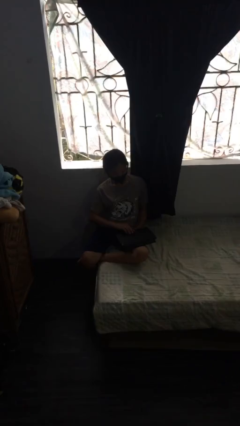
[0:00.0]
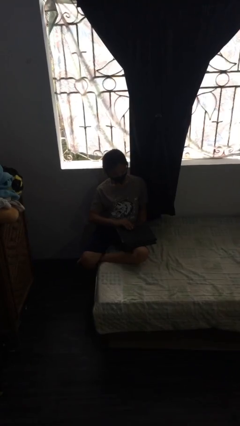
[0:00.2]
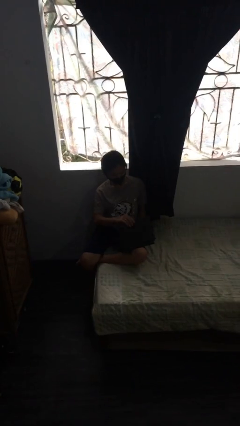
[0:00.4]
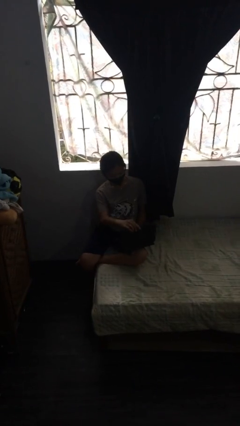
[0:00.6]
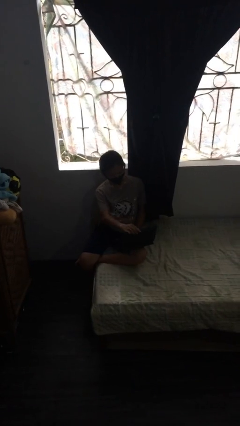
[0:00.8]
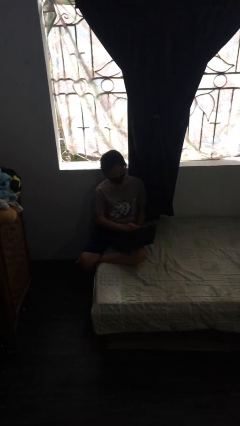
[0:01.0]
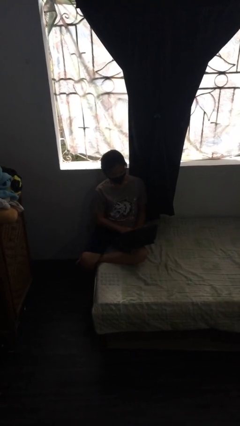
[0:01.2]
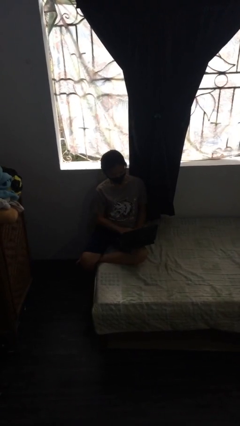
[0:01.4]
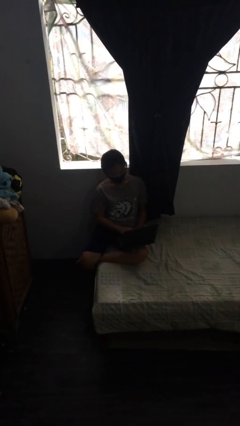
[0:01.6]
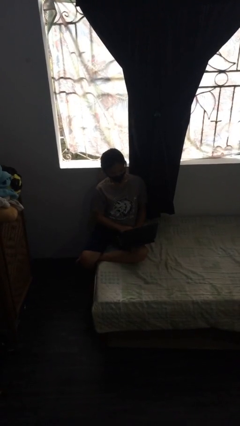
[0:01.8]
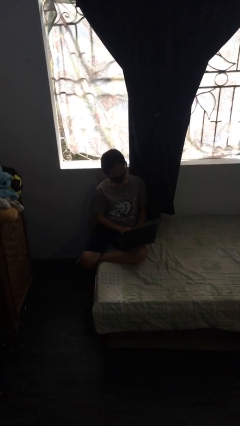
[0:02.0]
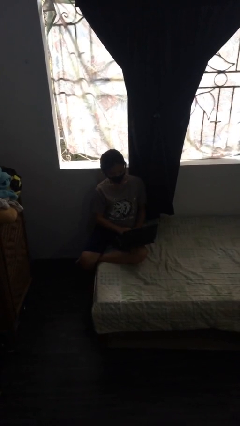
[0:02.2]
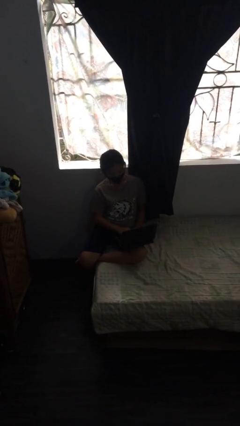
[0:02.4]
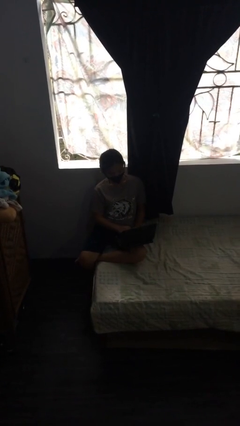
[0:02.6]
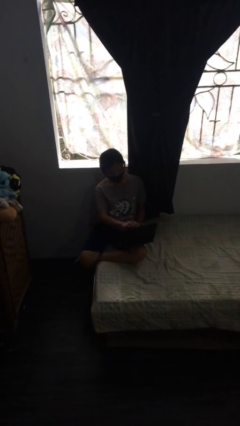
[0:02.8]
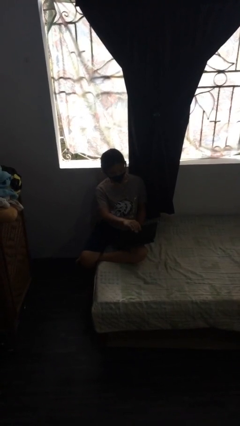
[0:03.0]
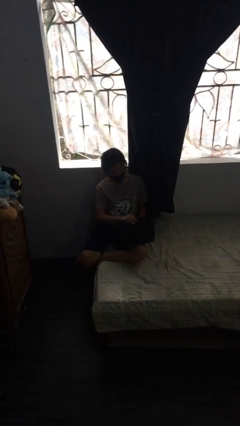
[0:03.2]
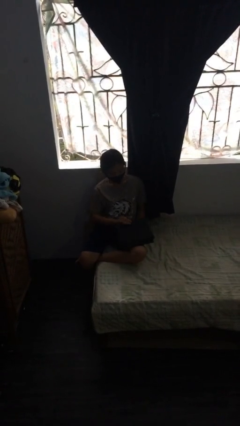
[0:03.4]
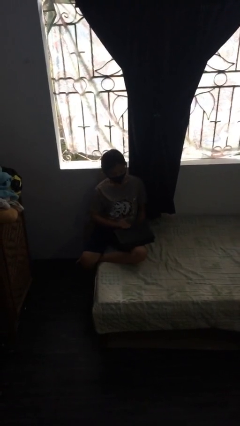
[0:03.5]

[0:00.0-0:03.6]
person interacts with laptop

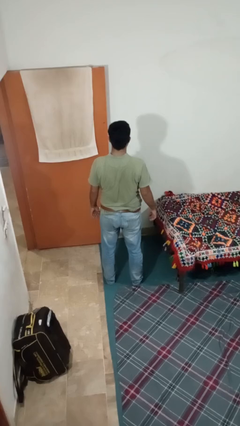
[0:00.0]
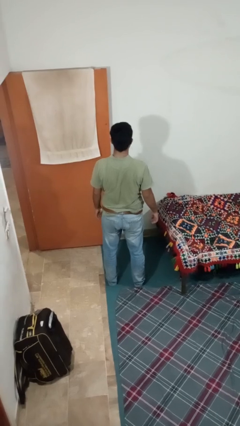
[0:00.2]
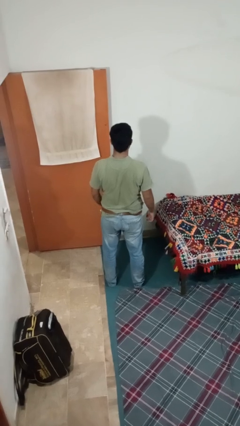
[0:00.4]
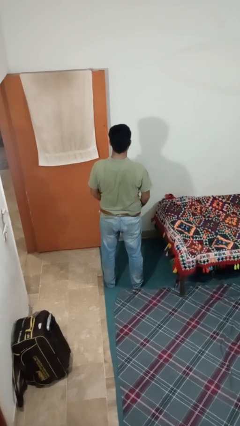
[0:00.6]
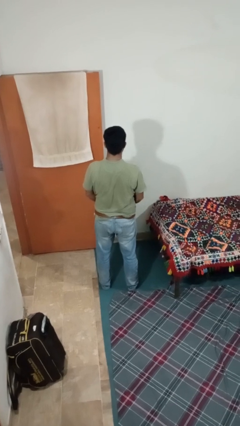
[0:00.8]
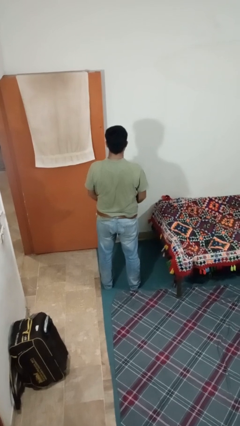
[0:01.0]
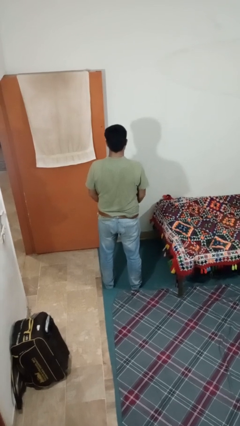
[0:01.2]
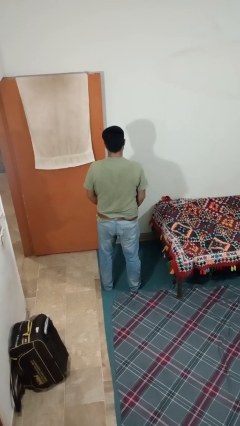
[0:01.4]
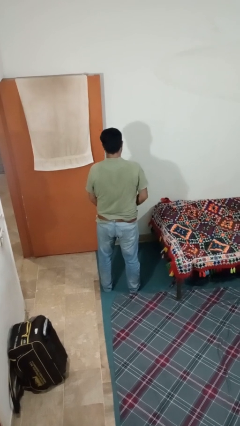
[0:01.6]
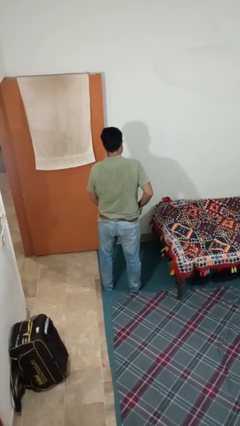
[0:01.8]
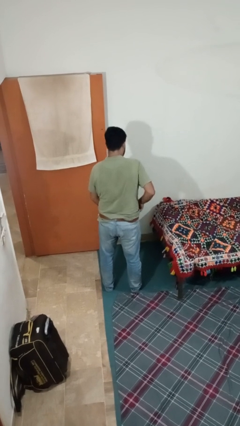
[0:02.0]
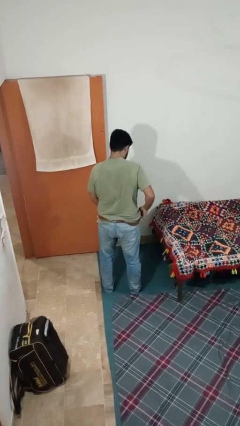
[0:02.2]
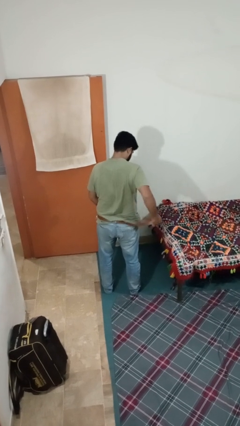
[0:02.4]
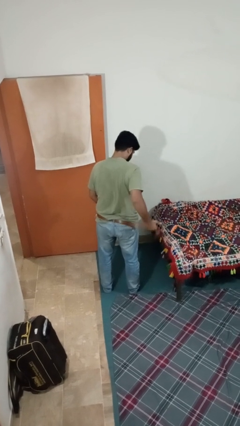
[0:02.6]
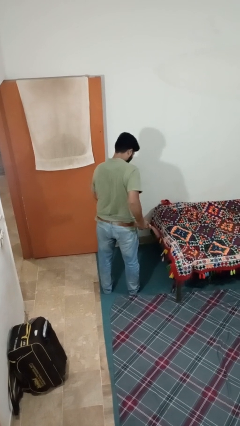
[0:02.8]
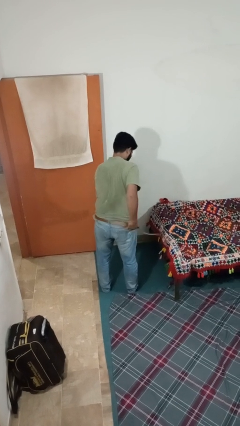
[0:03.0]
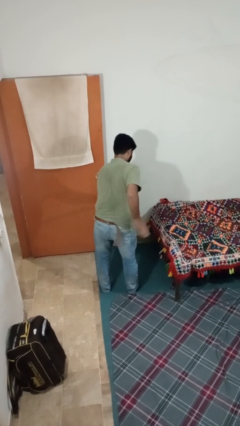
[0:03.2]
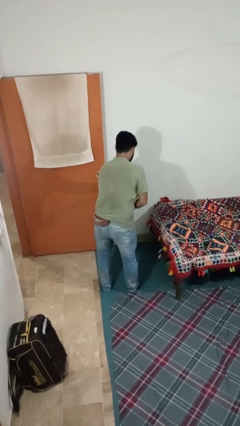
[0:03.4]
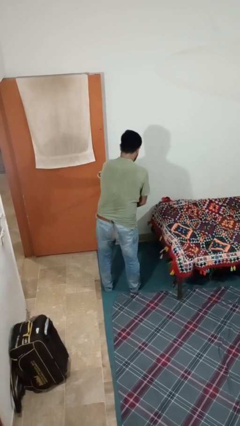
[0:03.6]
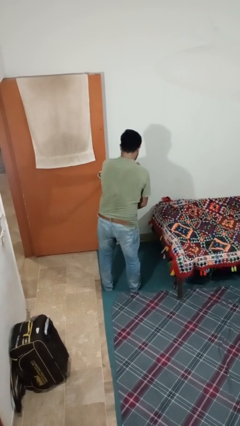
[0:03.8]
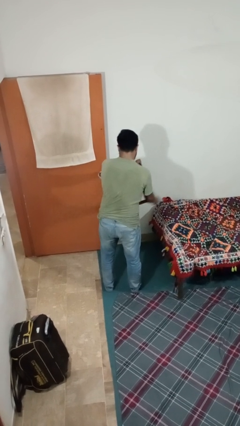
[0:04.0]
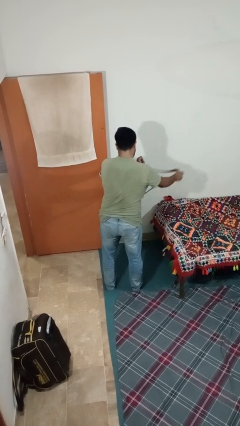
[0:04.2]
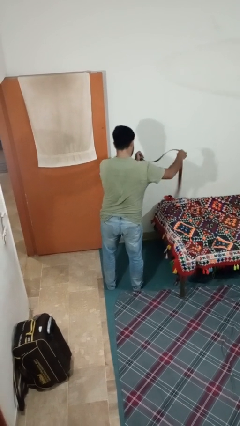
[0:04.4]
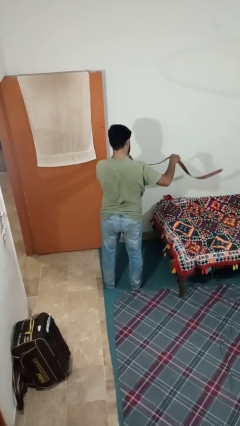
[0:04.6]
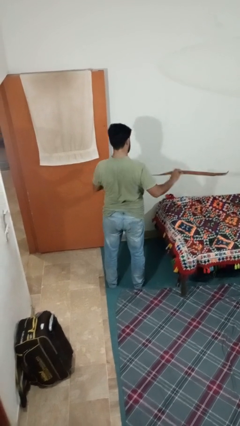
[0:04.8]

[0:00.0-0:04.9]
person takes off belt

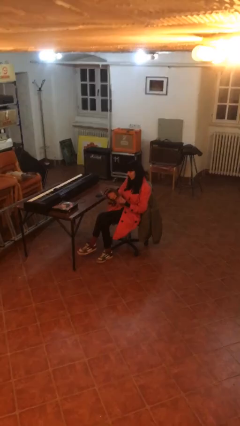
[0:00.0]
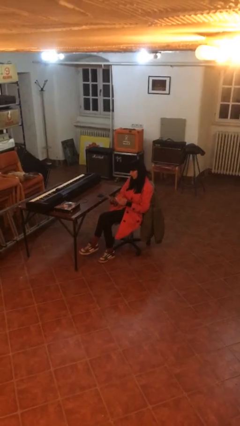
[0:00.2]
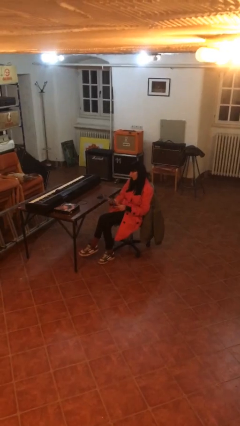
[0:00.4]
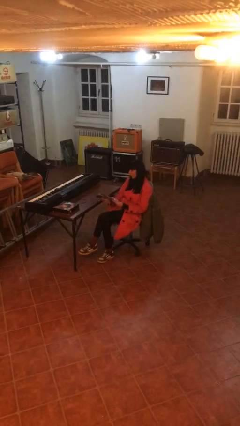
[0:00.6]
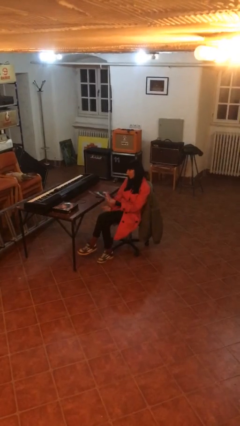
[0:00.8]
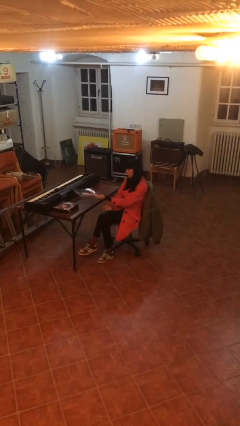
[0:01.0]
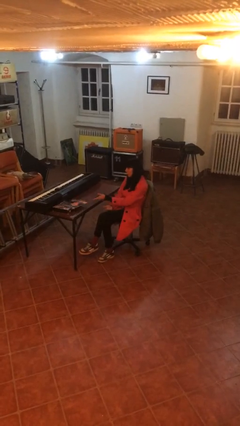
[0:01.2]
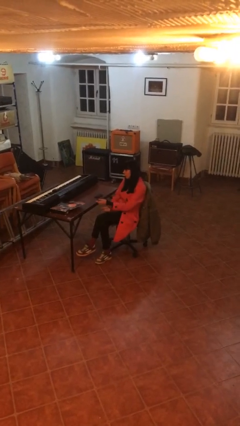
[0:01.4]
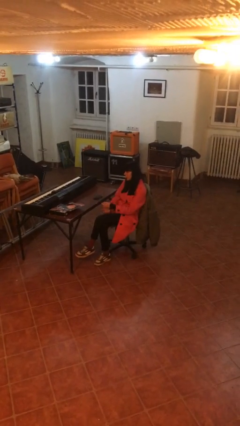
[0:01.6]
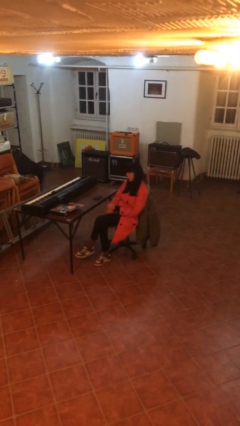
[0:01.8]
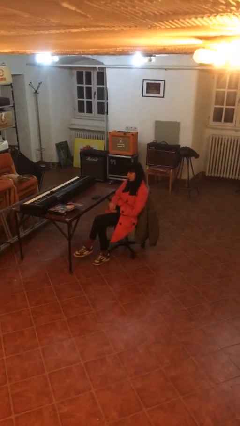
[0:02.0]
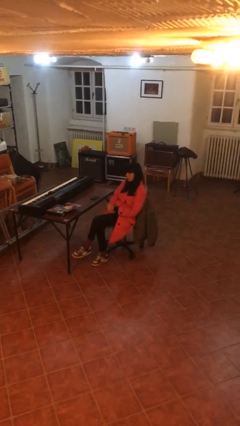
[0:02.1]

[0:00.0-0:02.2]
person puts down object on table

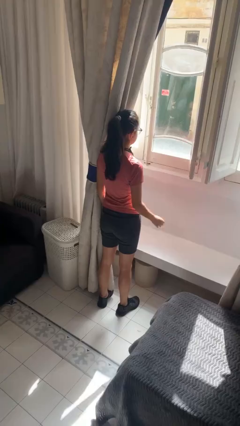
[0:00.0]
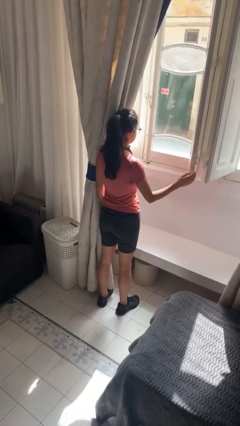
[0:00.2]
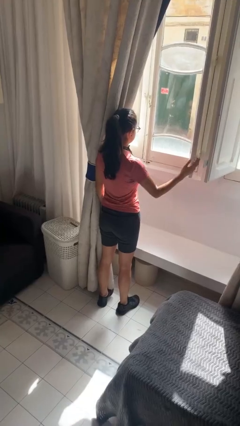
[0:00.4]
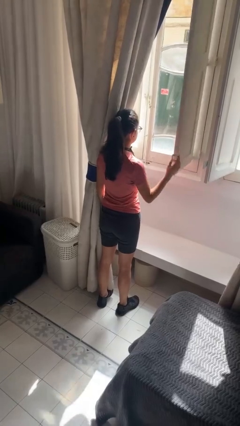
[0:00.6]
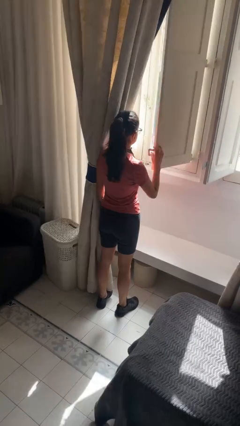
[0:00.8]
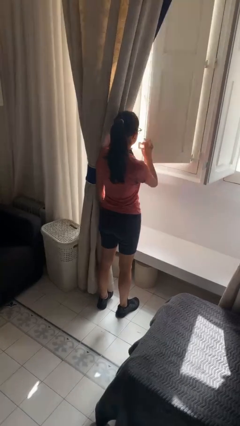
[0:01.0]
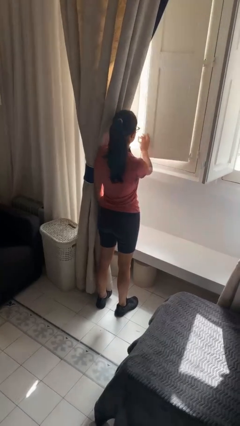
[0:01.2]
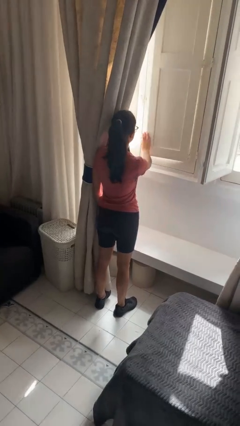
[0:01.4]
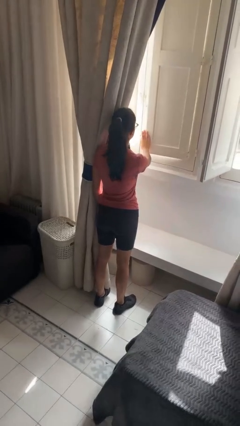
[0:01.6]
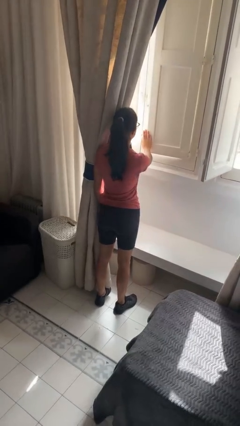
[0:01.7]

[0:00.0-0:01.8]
person closes home window

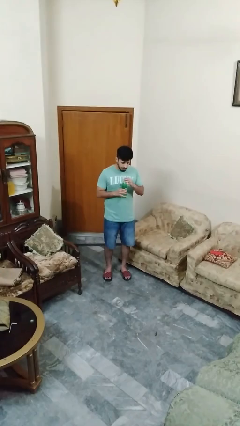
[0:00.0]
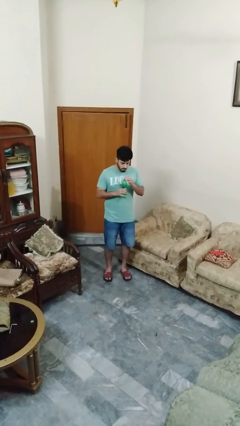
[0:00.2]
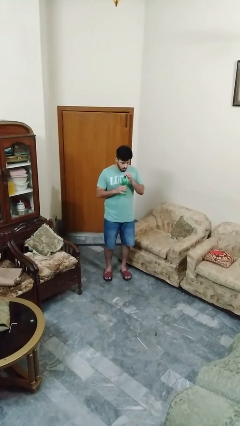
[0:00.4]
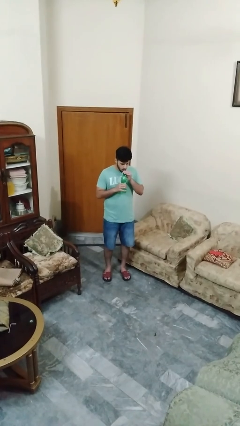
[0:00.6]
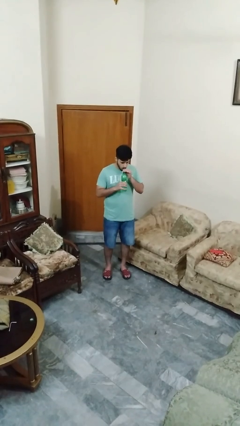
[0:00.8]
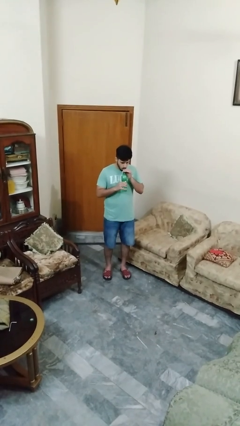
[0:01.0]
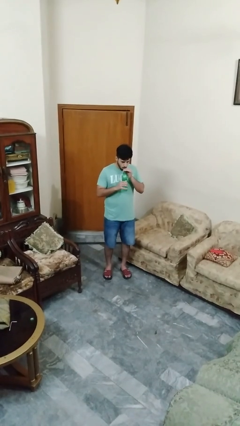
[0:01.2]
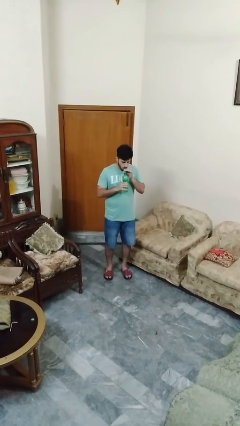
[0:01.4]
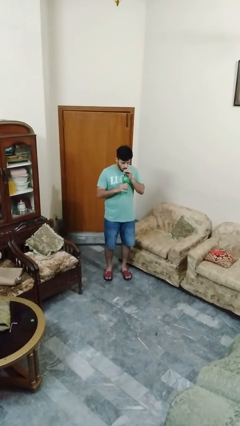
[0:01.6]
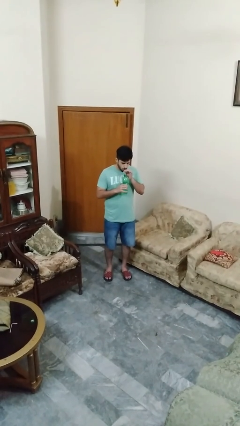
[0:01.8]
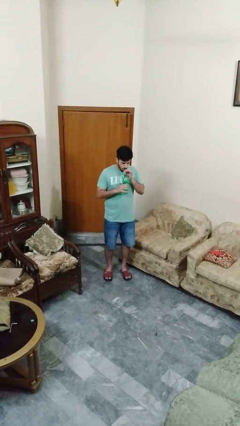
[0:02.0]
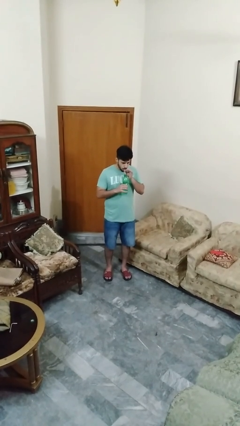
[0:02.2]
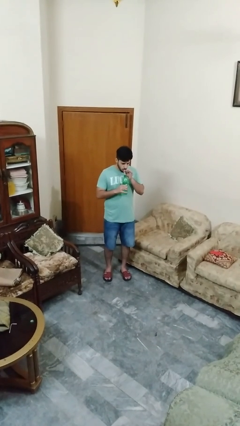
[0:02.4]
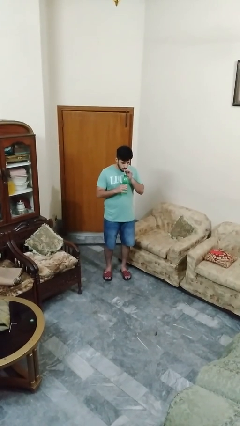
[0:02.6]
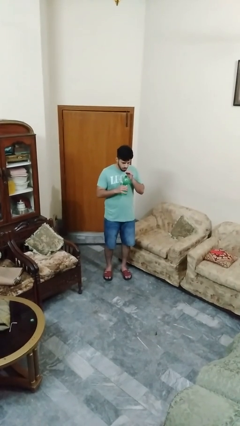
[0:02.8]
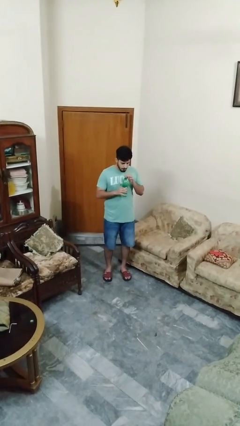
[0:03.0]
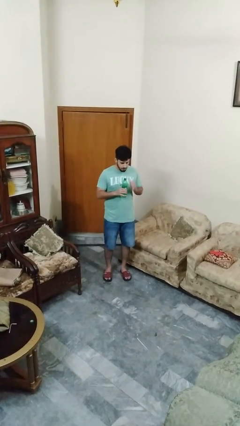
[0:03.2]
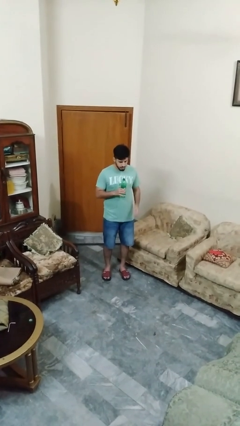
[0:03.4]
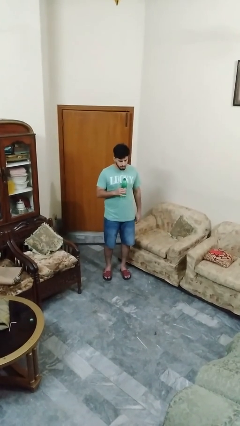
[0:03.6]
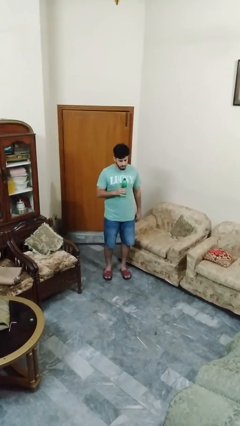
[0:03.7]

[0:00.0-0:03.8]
person drinks from straw

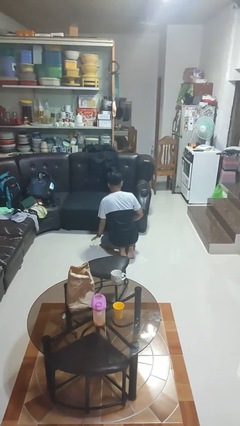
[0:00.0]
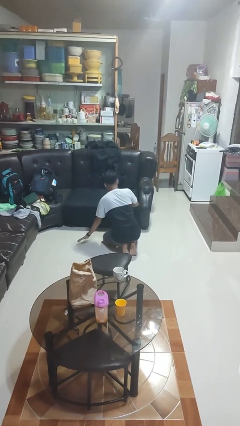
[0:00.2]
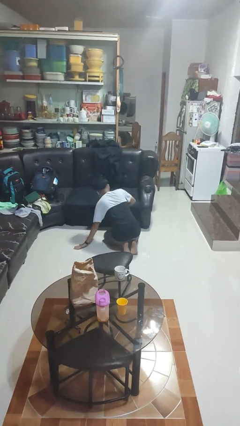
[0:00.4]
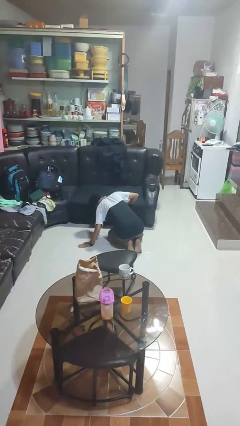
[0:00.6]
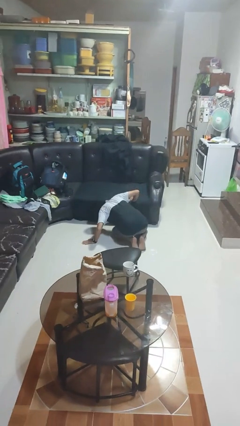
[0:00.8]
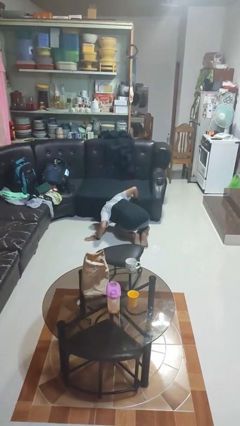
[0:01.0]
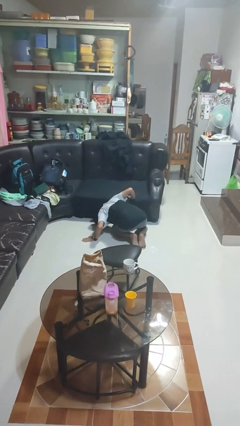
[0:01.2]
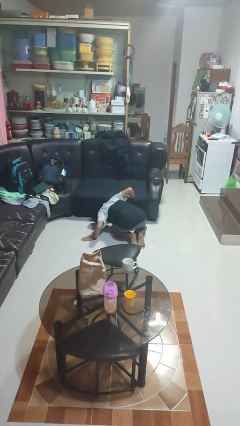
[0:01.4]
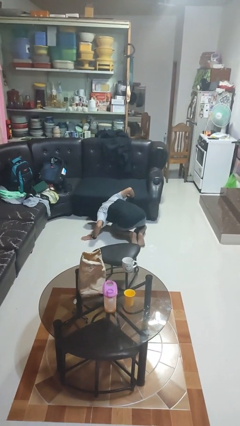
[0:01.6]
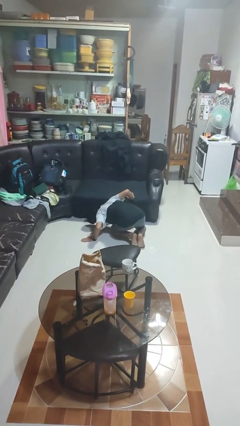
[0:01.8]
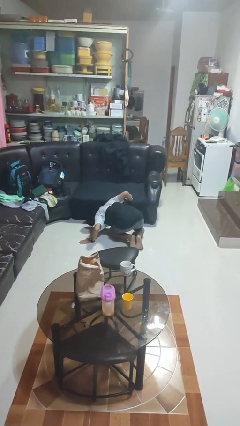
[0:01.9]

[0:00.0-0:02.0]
person searches under couch
